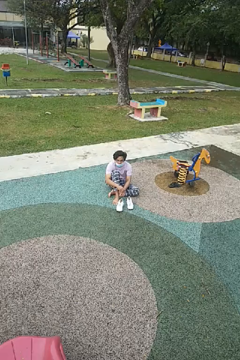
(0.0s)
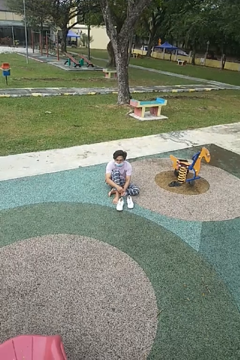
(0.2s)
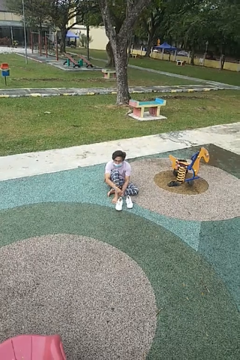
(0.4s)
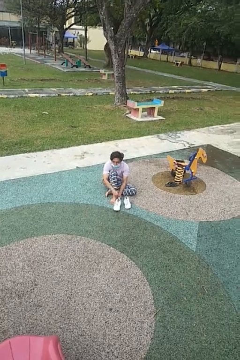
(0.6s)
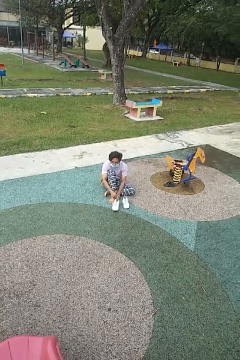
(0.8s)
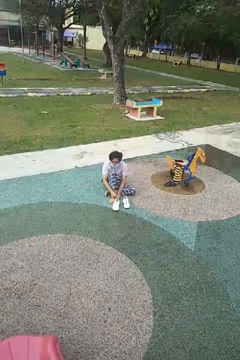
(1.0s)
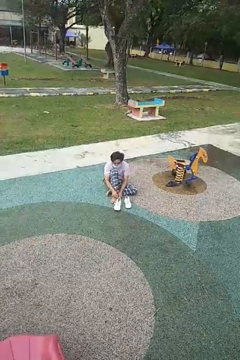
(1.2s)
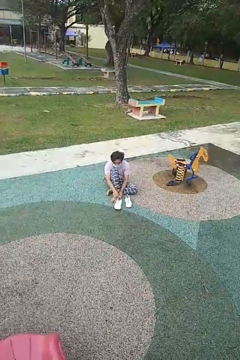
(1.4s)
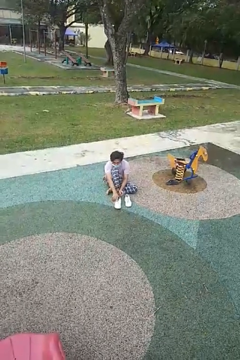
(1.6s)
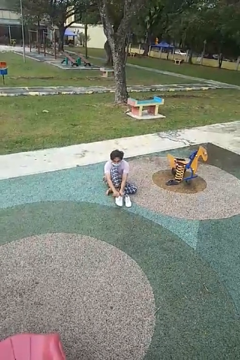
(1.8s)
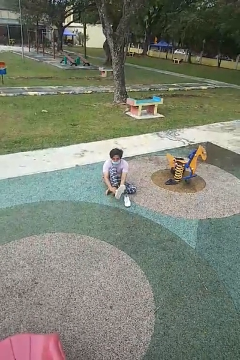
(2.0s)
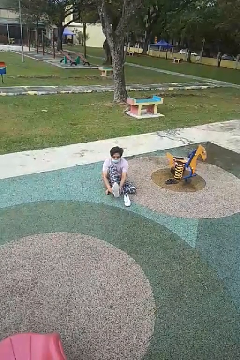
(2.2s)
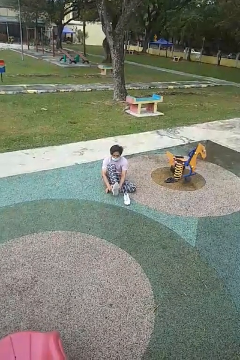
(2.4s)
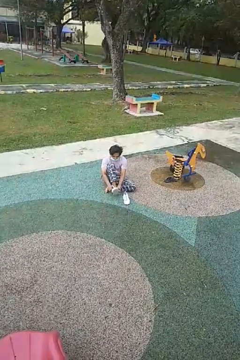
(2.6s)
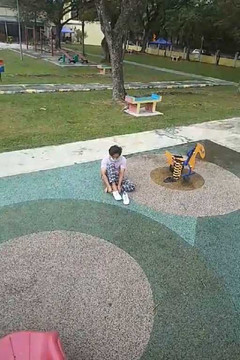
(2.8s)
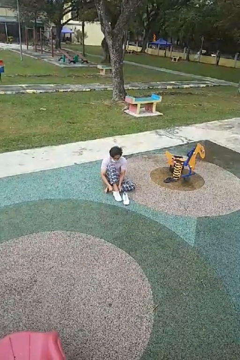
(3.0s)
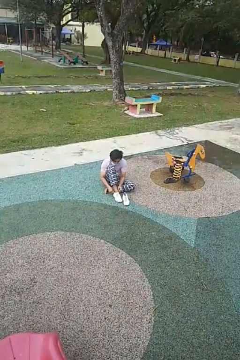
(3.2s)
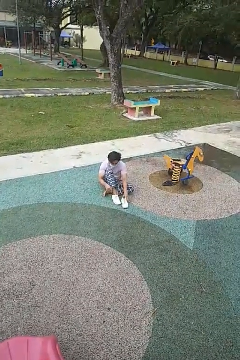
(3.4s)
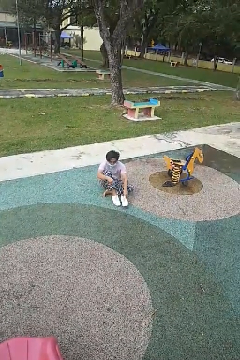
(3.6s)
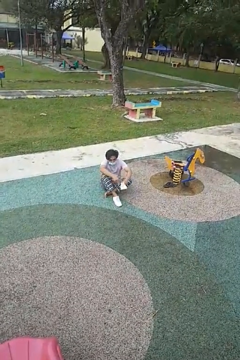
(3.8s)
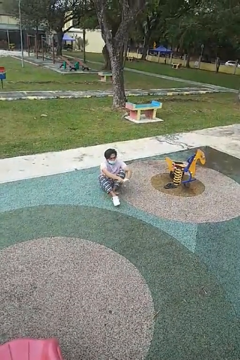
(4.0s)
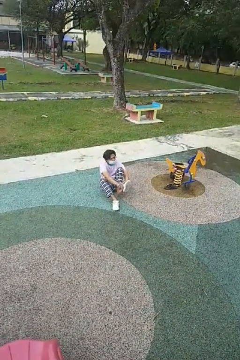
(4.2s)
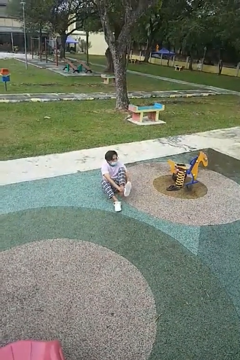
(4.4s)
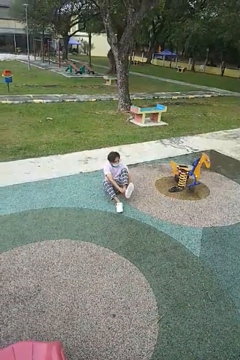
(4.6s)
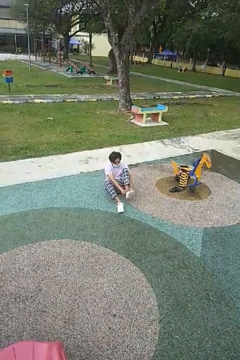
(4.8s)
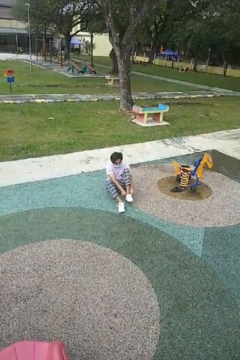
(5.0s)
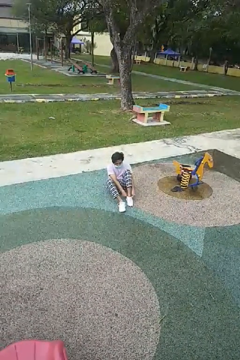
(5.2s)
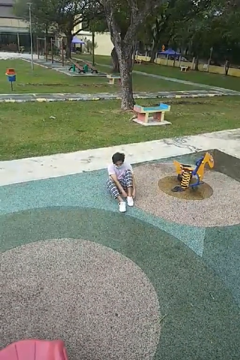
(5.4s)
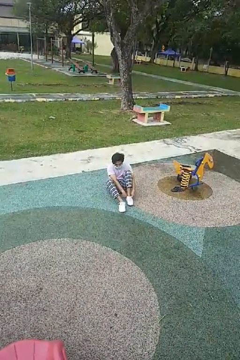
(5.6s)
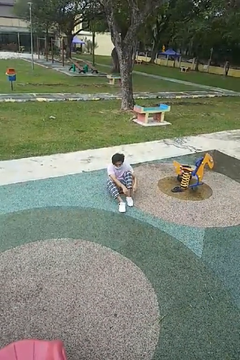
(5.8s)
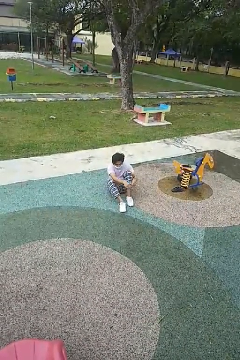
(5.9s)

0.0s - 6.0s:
person puts on shoes

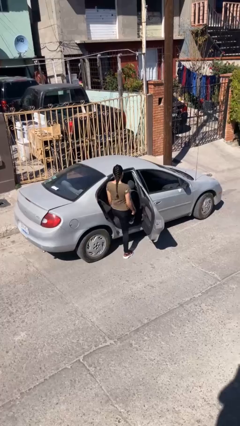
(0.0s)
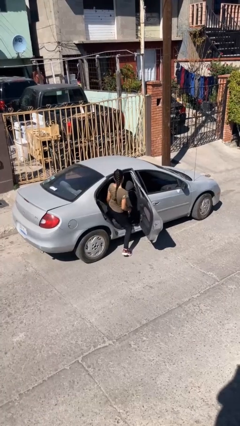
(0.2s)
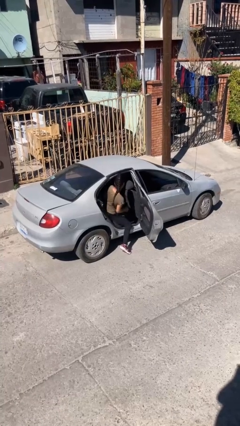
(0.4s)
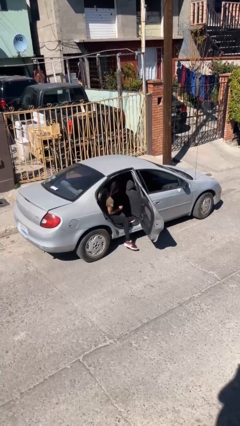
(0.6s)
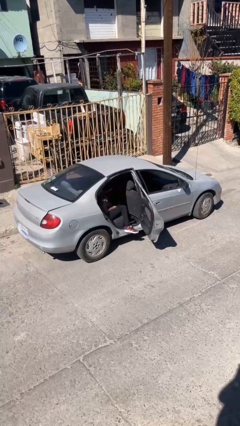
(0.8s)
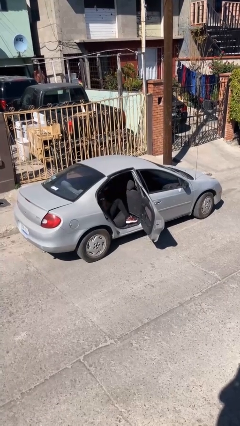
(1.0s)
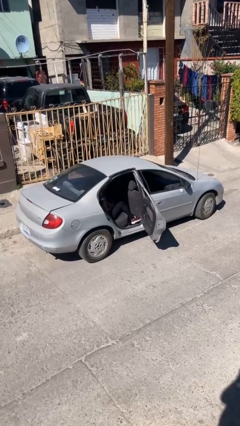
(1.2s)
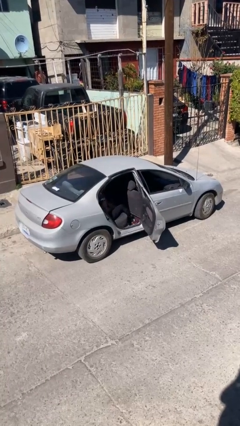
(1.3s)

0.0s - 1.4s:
person enters car

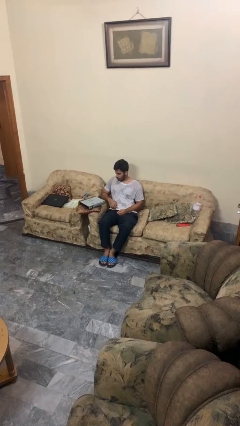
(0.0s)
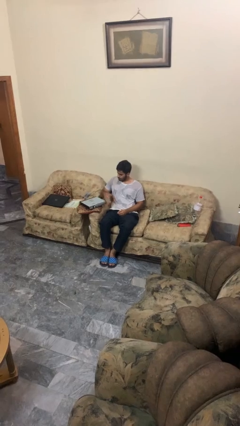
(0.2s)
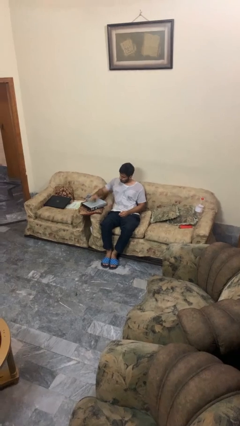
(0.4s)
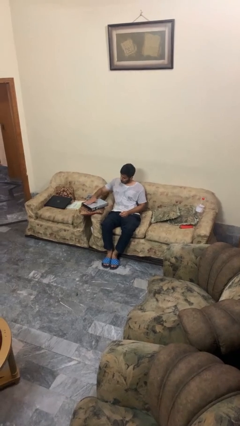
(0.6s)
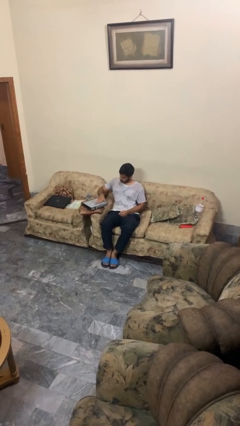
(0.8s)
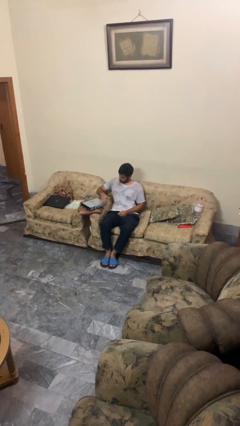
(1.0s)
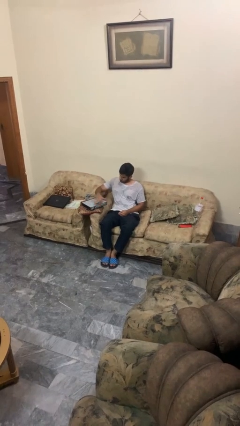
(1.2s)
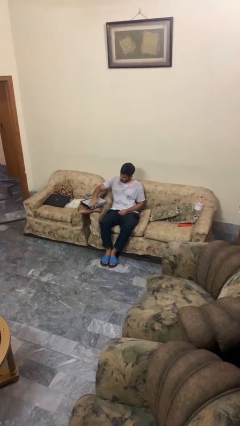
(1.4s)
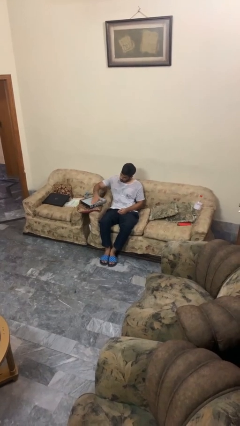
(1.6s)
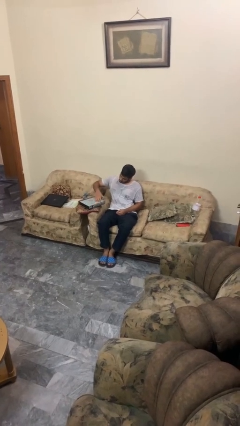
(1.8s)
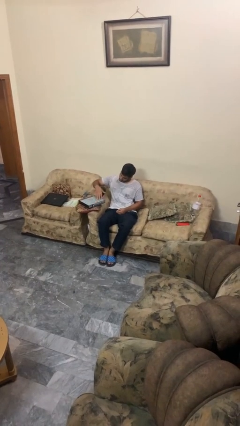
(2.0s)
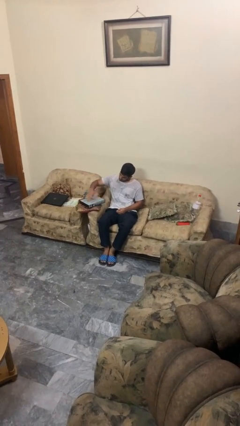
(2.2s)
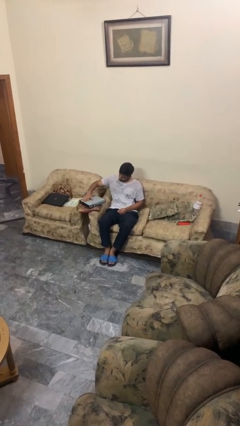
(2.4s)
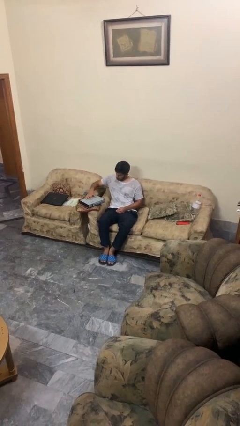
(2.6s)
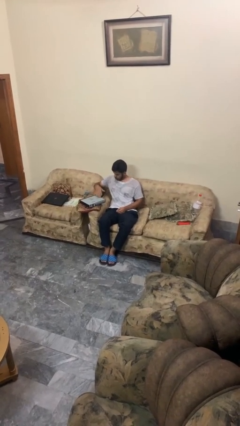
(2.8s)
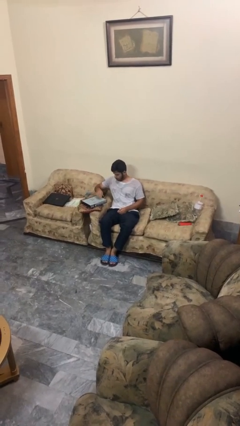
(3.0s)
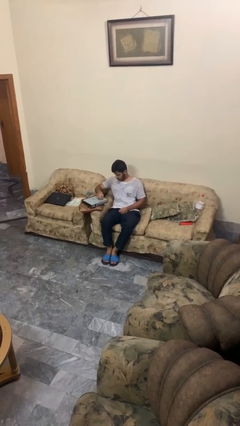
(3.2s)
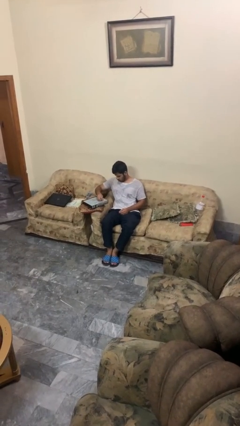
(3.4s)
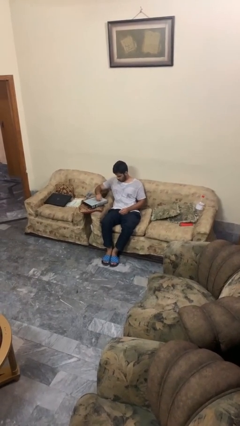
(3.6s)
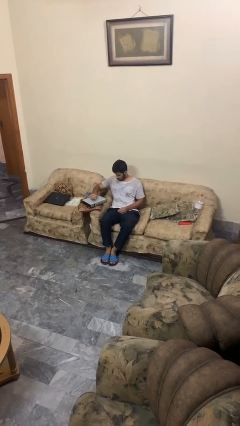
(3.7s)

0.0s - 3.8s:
person waves hand over object

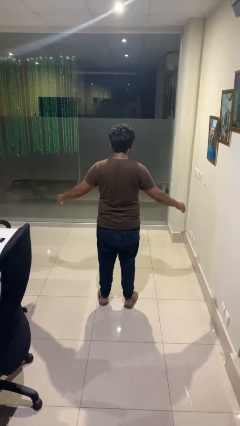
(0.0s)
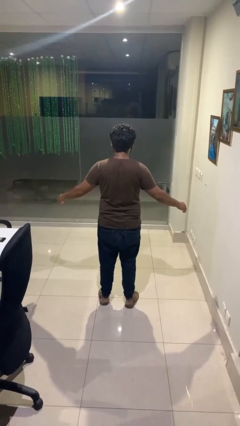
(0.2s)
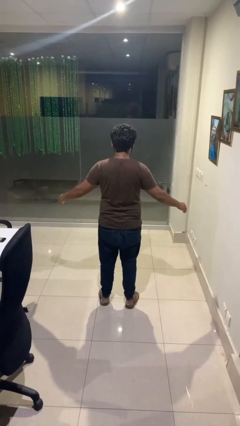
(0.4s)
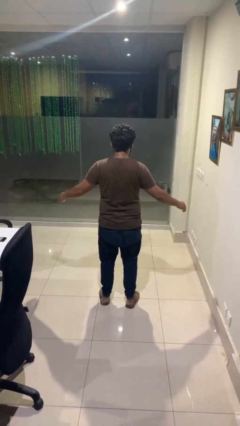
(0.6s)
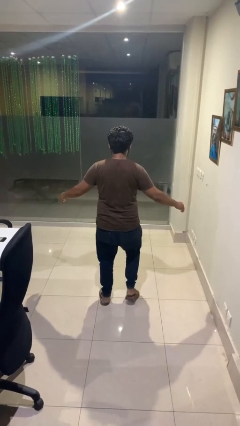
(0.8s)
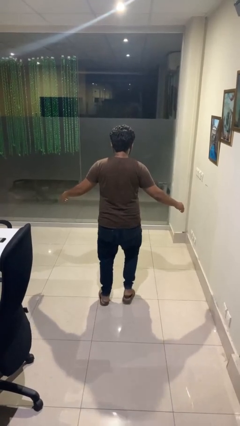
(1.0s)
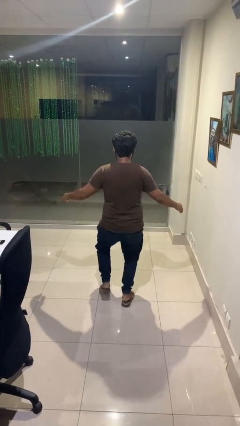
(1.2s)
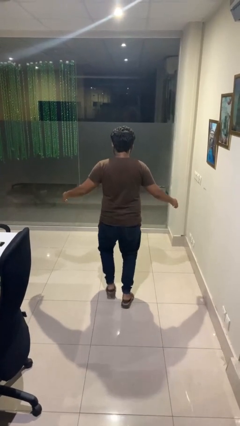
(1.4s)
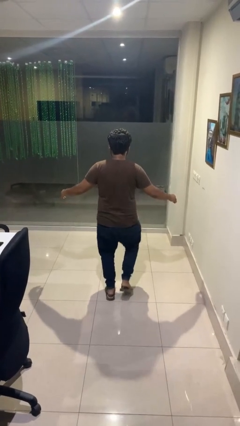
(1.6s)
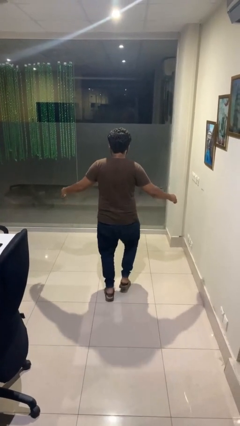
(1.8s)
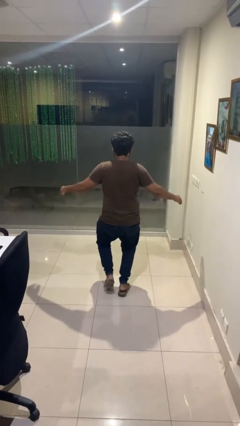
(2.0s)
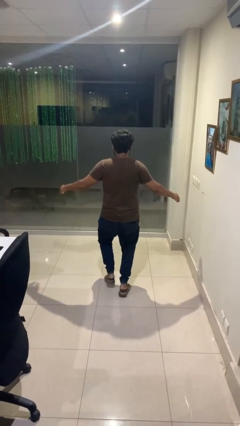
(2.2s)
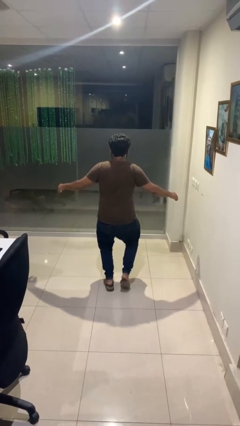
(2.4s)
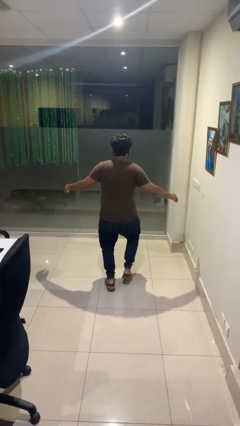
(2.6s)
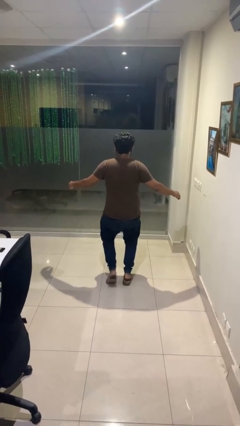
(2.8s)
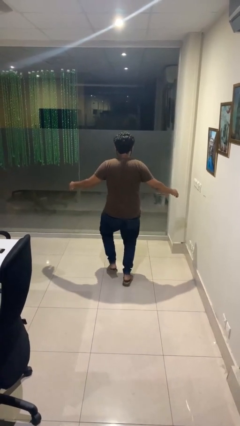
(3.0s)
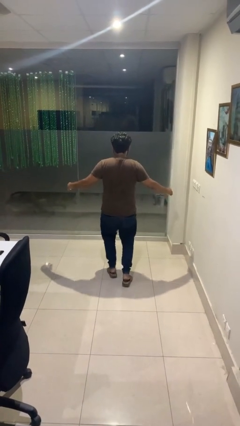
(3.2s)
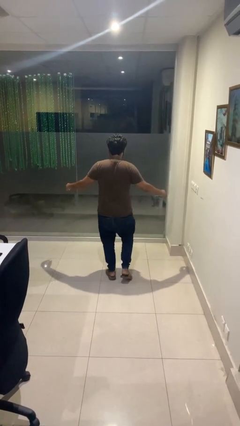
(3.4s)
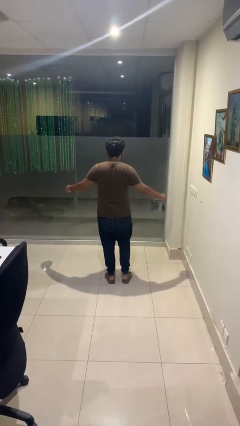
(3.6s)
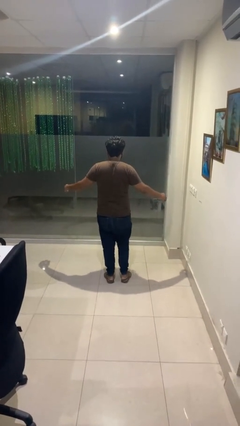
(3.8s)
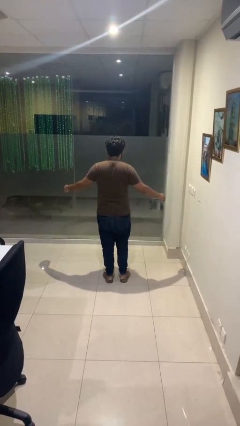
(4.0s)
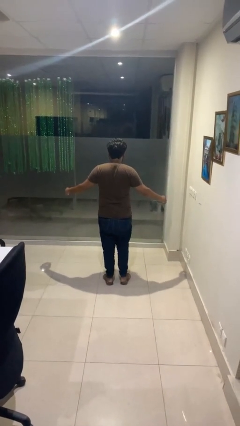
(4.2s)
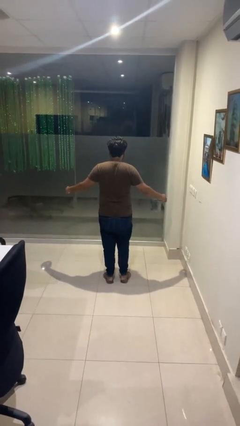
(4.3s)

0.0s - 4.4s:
person walks tiptoe

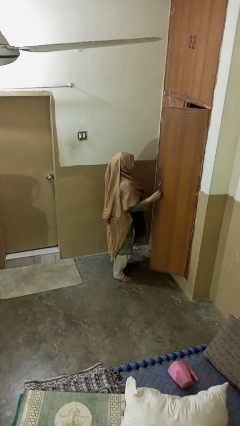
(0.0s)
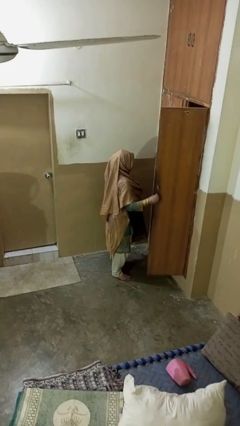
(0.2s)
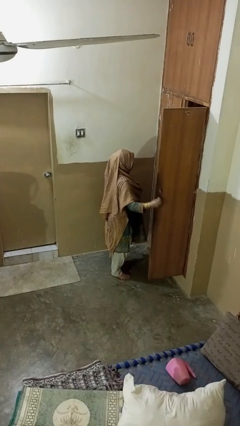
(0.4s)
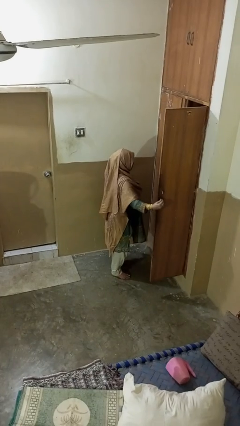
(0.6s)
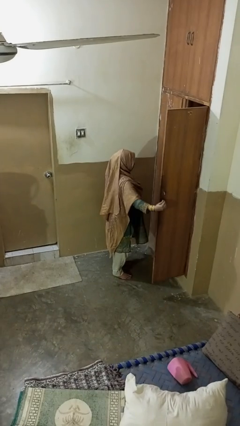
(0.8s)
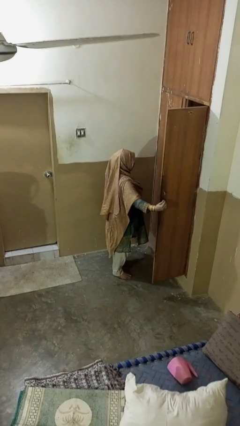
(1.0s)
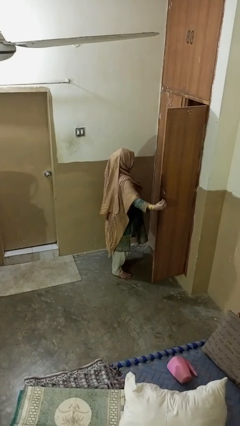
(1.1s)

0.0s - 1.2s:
person opens closet door

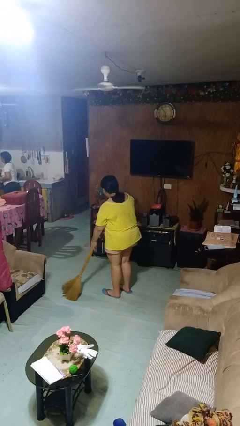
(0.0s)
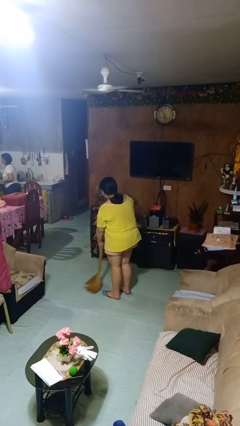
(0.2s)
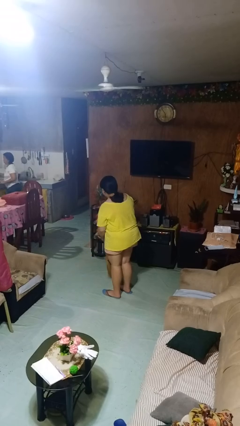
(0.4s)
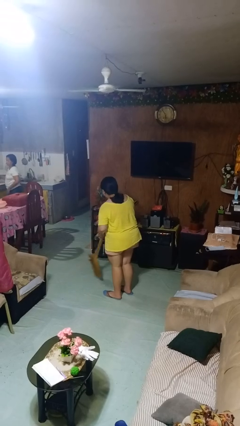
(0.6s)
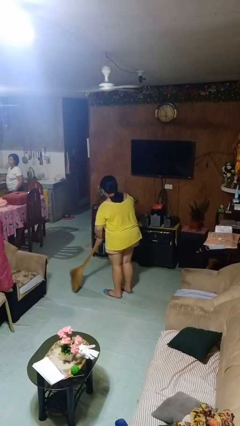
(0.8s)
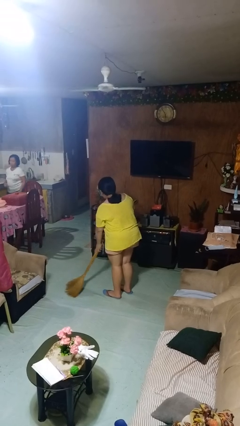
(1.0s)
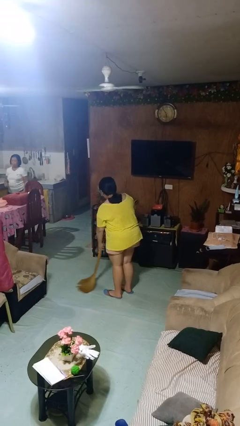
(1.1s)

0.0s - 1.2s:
person sweeps floor

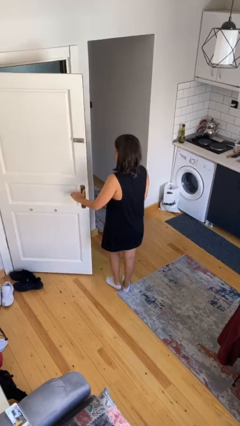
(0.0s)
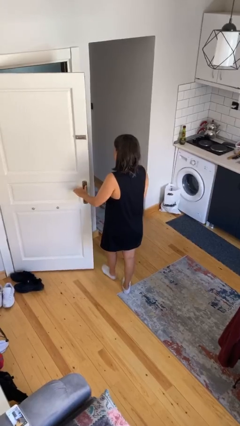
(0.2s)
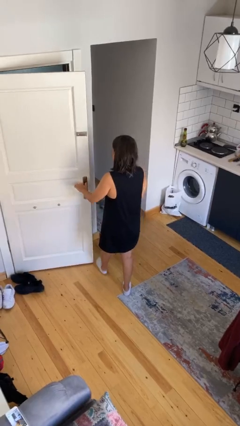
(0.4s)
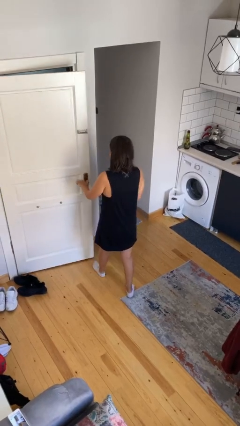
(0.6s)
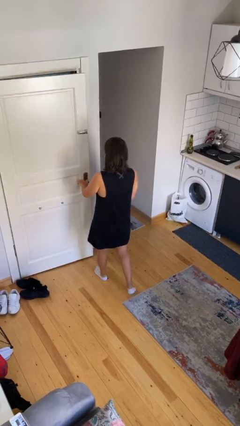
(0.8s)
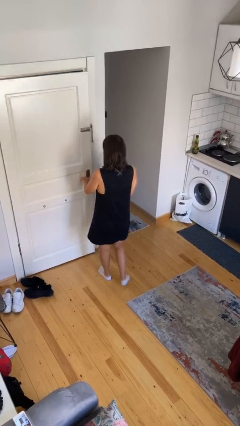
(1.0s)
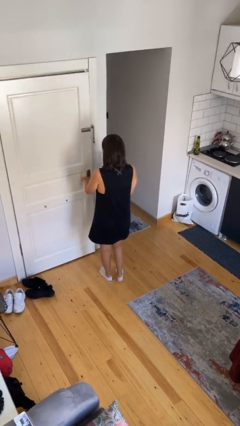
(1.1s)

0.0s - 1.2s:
person closes facility door
